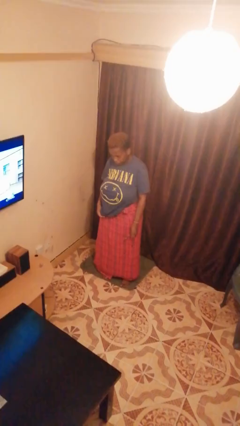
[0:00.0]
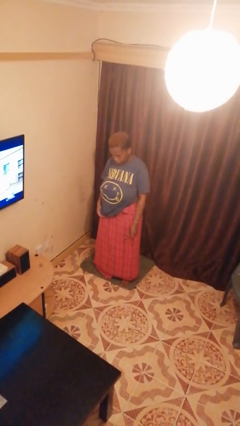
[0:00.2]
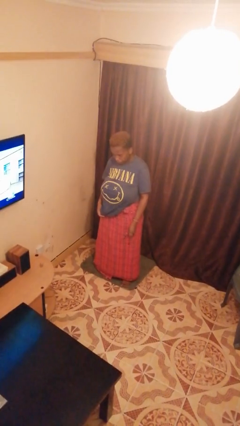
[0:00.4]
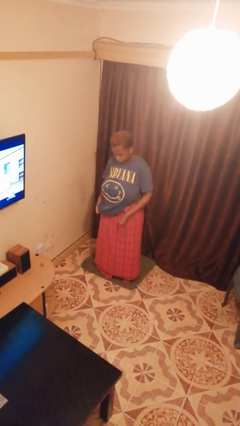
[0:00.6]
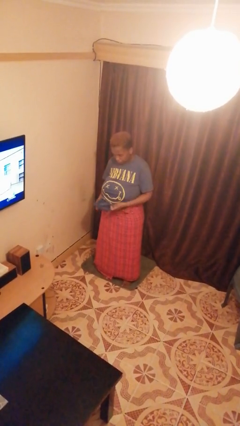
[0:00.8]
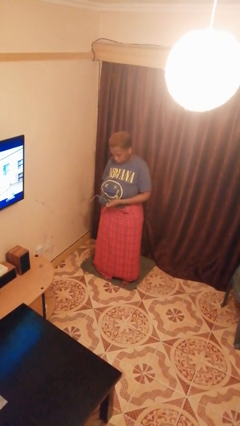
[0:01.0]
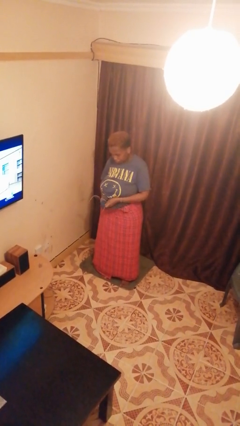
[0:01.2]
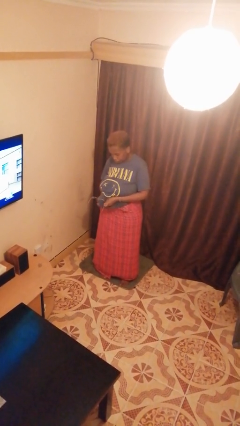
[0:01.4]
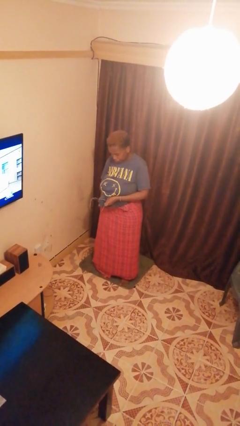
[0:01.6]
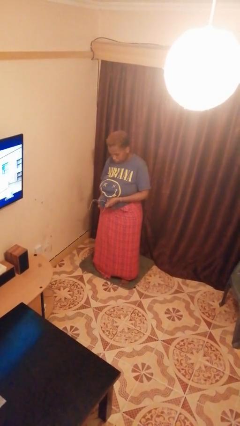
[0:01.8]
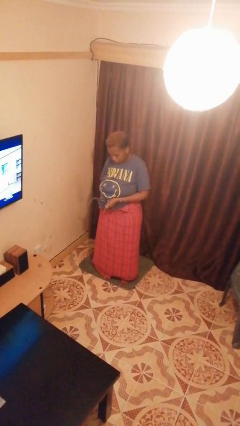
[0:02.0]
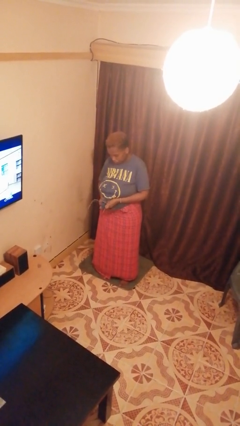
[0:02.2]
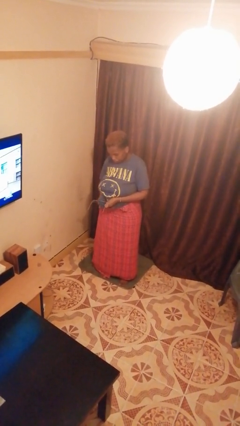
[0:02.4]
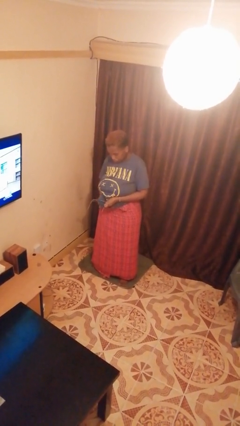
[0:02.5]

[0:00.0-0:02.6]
person cleans eyeglasses

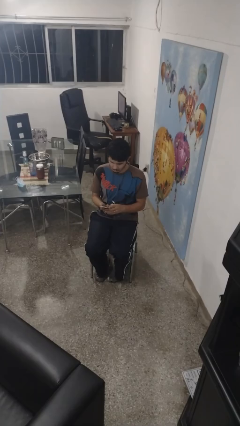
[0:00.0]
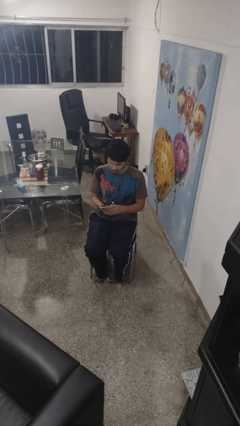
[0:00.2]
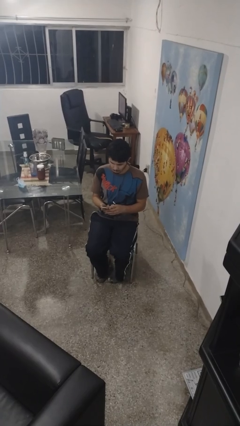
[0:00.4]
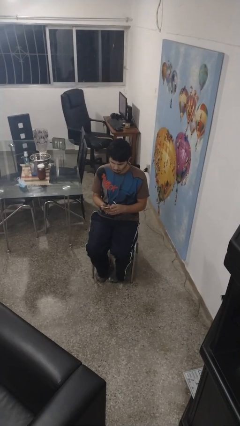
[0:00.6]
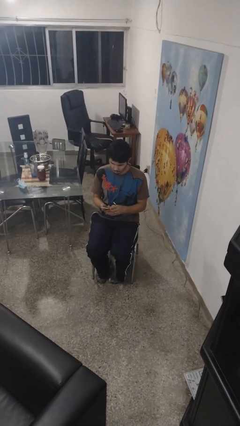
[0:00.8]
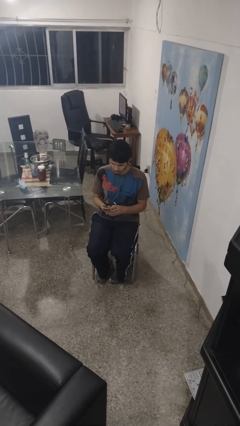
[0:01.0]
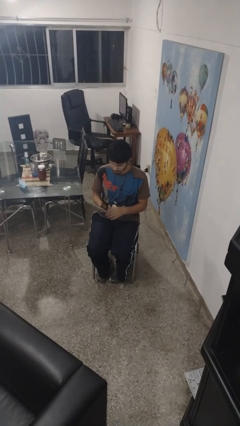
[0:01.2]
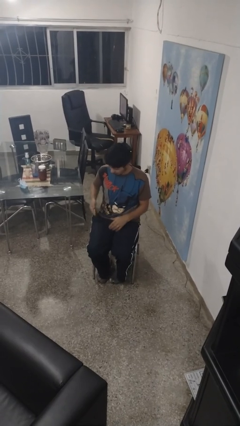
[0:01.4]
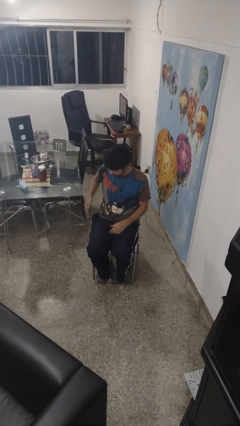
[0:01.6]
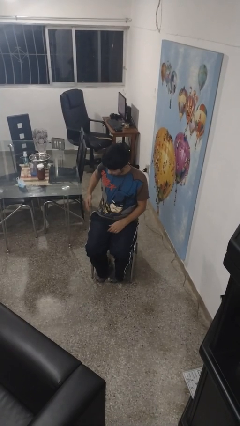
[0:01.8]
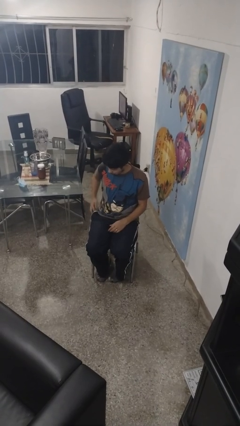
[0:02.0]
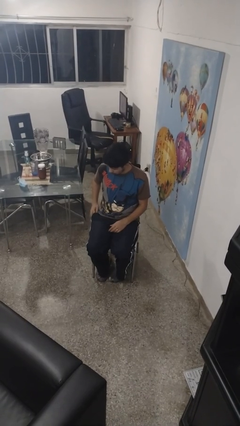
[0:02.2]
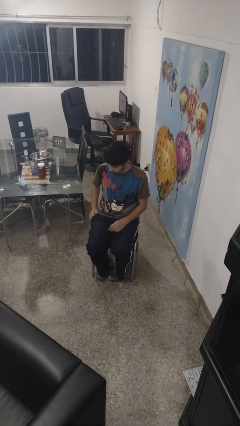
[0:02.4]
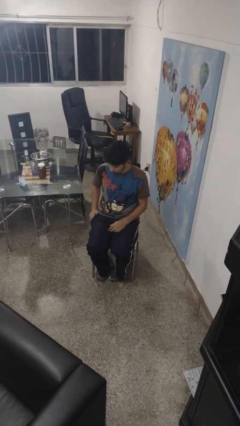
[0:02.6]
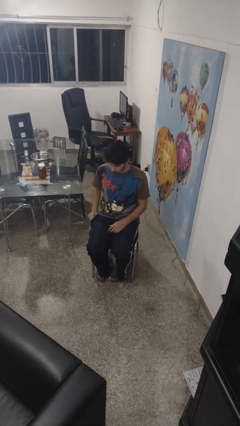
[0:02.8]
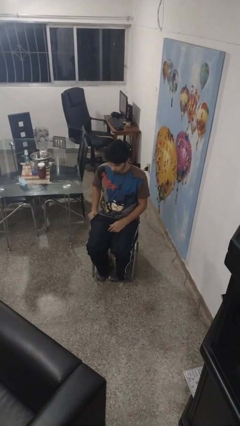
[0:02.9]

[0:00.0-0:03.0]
person puts phone into pocket

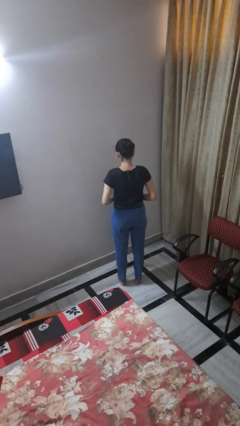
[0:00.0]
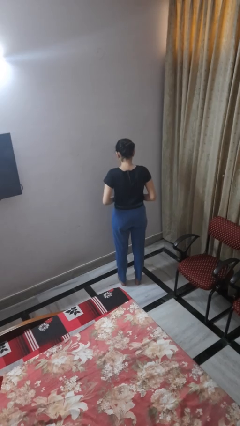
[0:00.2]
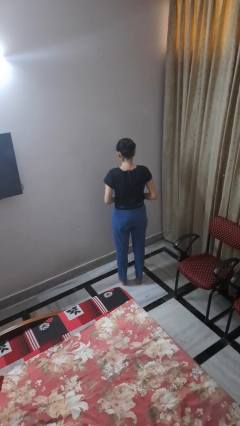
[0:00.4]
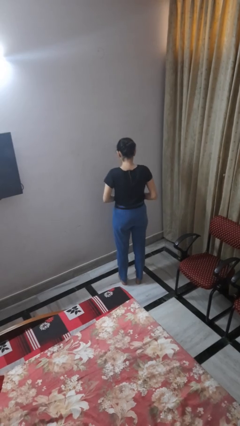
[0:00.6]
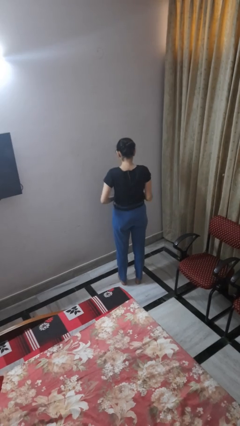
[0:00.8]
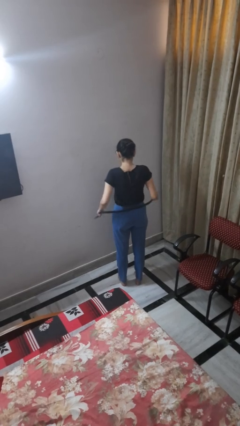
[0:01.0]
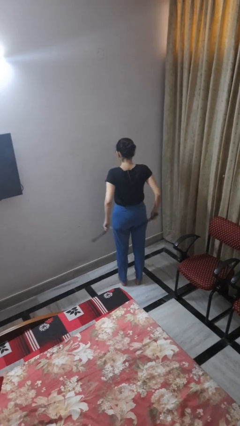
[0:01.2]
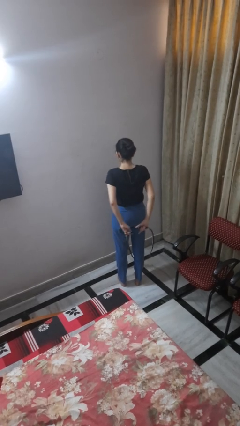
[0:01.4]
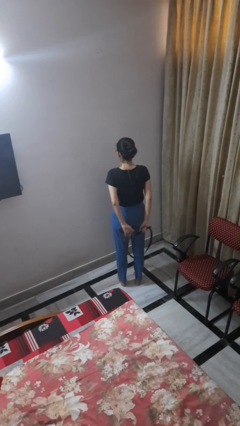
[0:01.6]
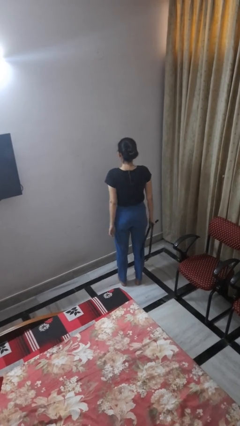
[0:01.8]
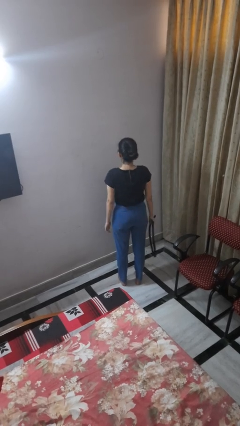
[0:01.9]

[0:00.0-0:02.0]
person takes off belt

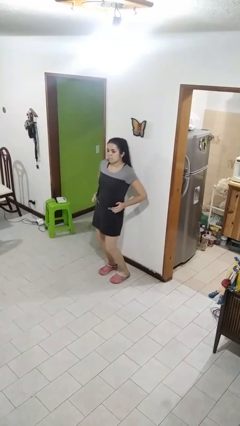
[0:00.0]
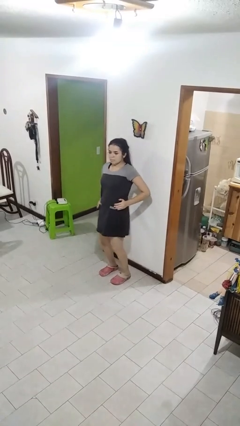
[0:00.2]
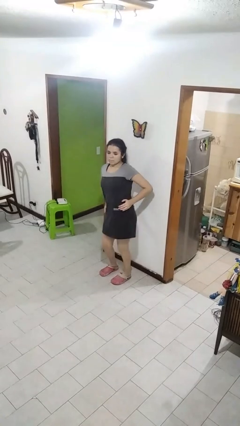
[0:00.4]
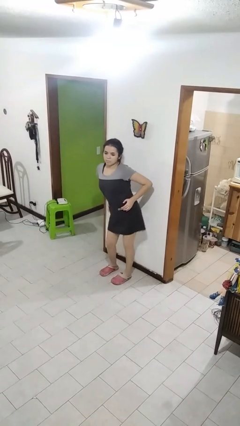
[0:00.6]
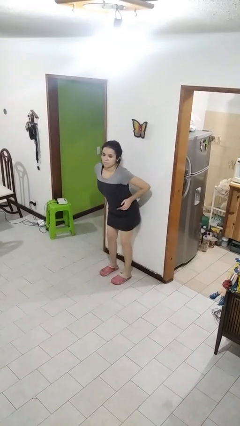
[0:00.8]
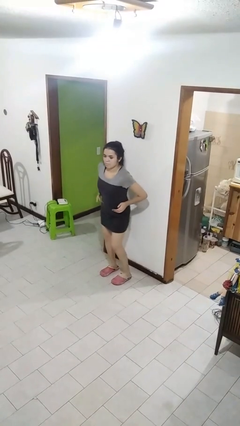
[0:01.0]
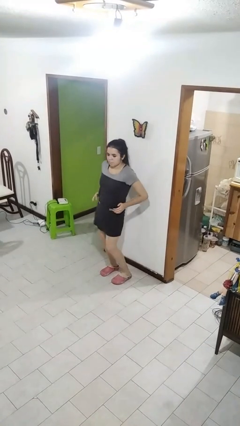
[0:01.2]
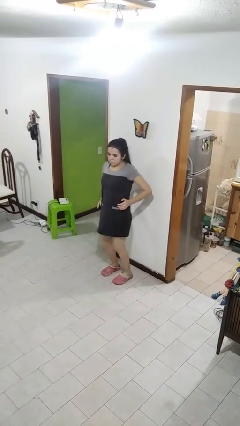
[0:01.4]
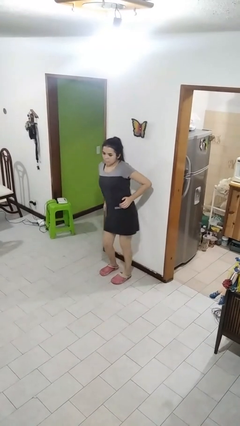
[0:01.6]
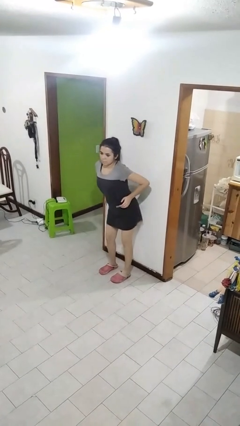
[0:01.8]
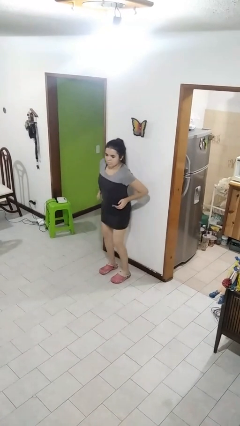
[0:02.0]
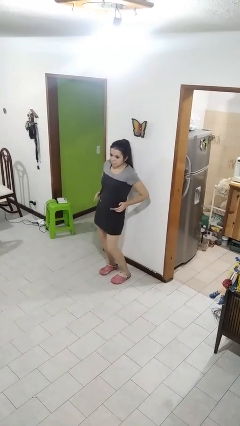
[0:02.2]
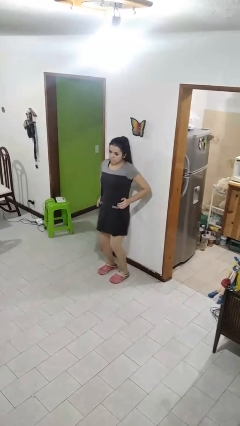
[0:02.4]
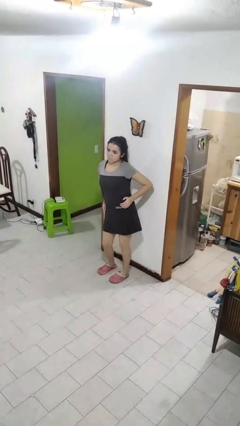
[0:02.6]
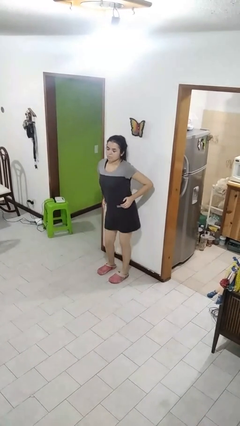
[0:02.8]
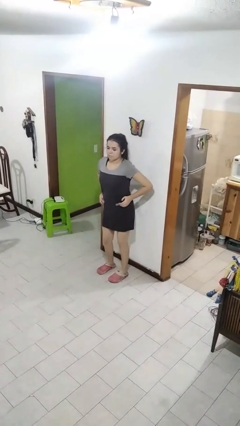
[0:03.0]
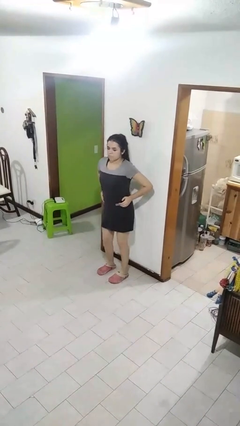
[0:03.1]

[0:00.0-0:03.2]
person wiggles hips

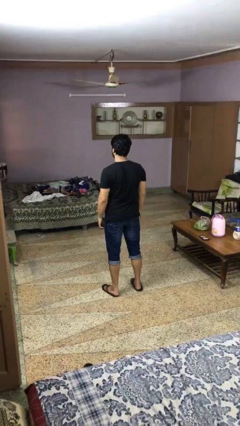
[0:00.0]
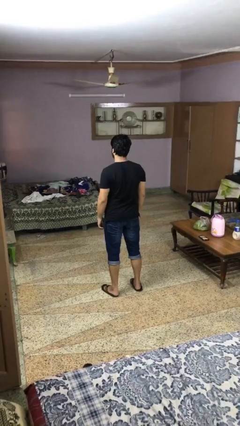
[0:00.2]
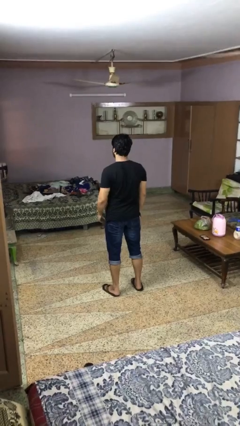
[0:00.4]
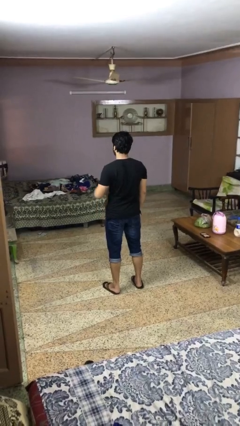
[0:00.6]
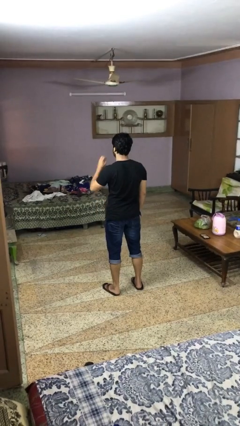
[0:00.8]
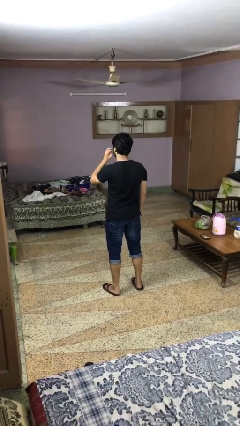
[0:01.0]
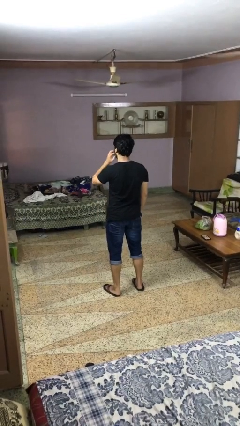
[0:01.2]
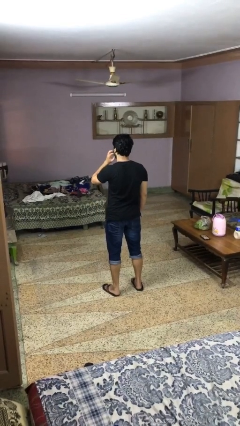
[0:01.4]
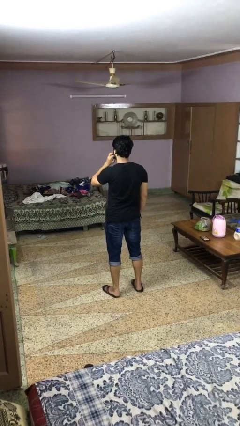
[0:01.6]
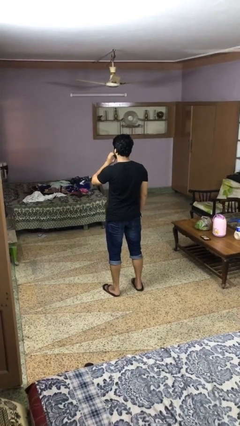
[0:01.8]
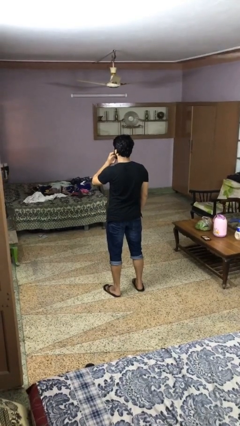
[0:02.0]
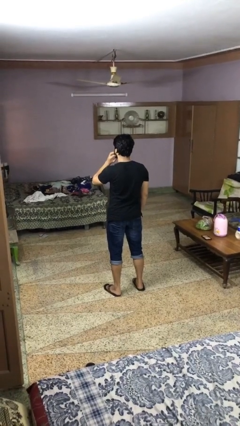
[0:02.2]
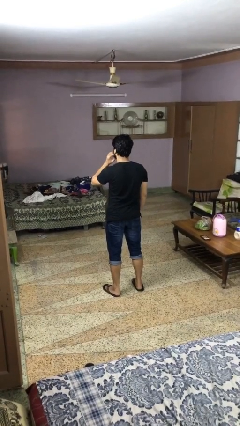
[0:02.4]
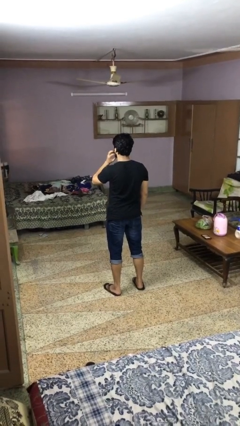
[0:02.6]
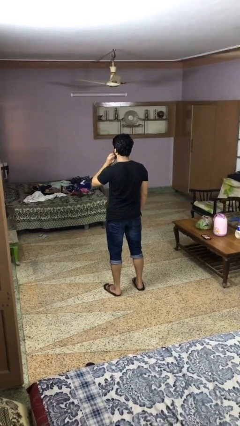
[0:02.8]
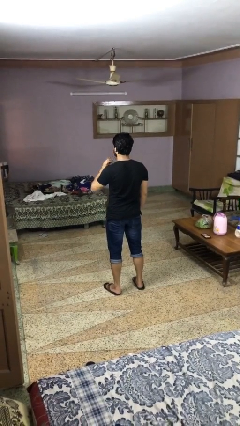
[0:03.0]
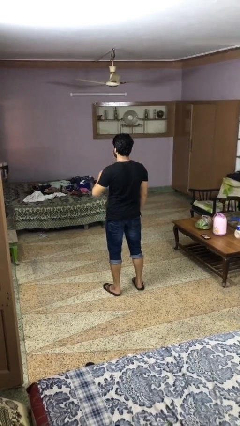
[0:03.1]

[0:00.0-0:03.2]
person scratches face

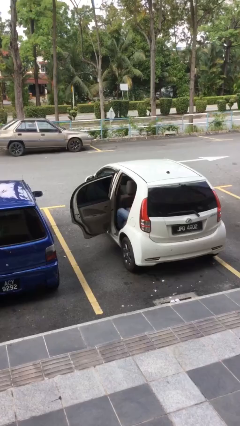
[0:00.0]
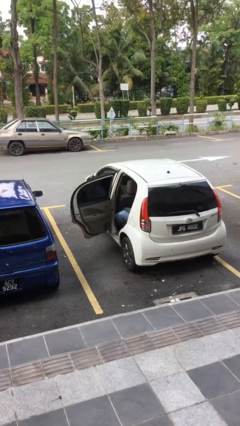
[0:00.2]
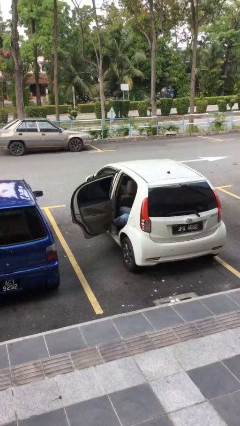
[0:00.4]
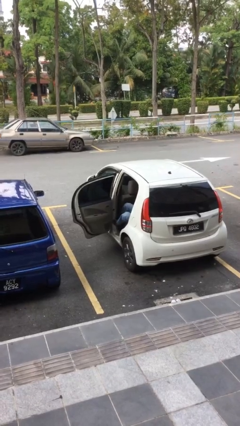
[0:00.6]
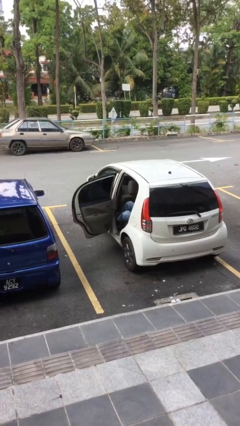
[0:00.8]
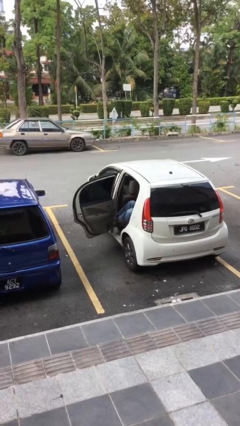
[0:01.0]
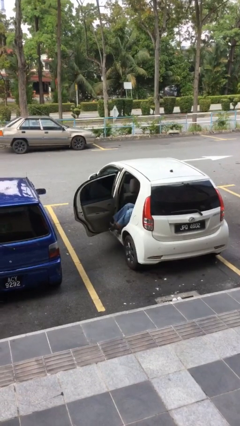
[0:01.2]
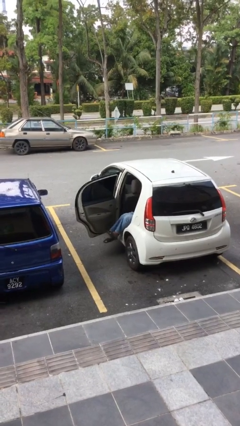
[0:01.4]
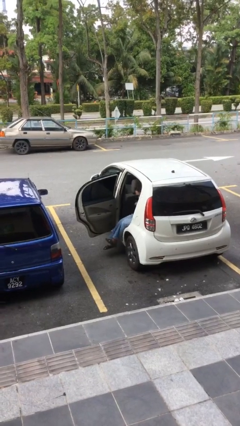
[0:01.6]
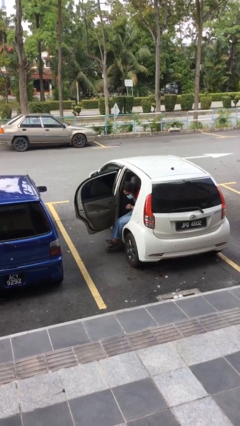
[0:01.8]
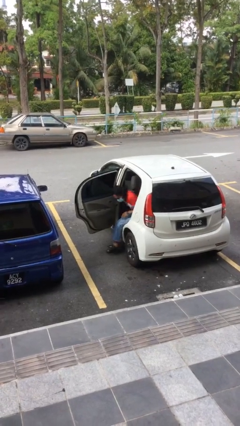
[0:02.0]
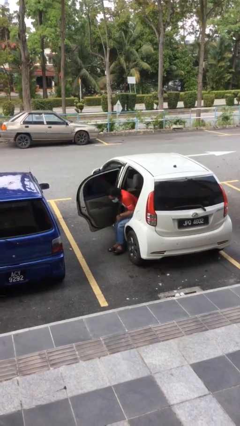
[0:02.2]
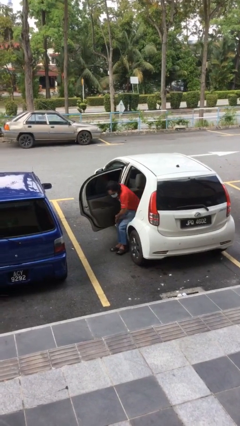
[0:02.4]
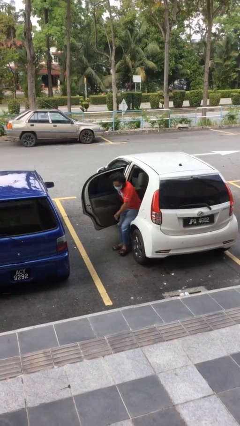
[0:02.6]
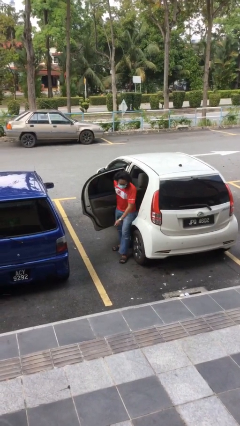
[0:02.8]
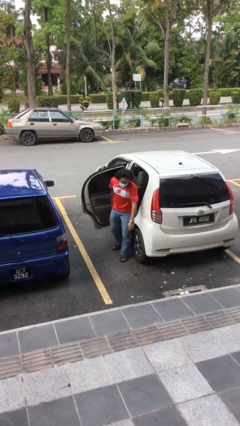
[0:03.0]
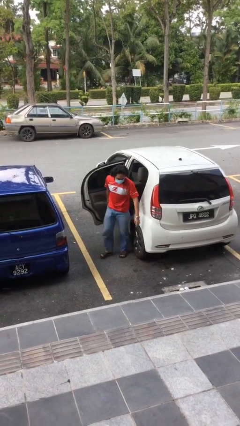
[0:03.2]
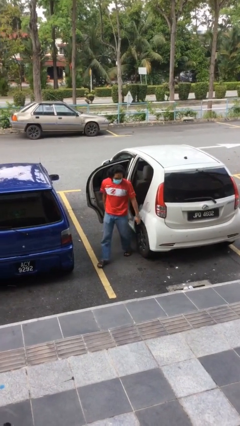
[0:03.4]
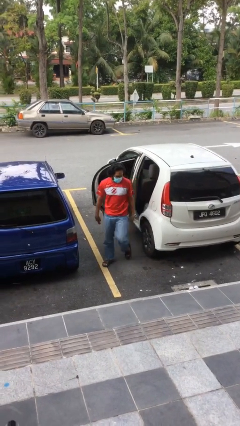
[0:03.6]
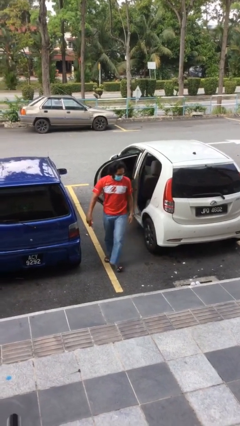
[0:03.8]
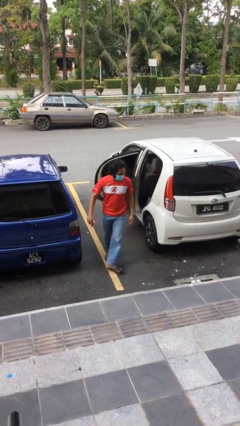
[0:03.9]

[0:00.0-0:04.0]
person exits car
